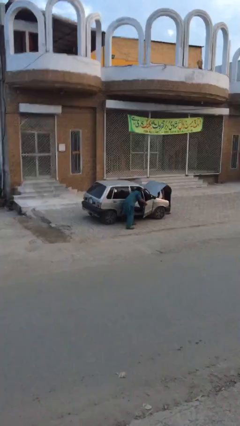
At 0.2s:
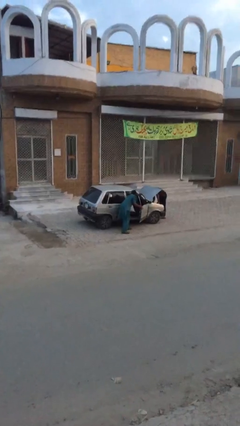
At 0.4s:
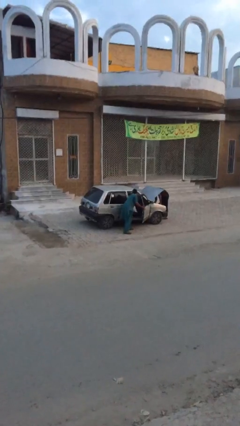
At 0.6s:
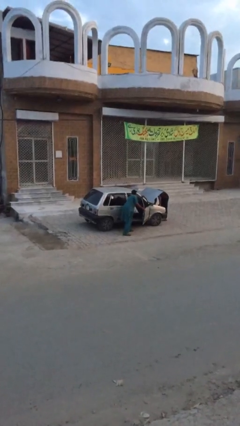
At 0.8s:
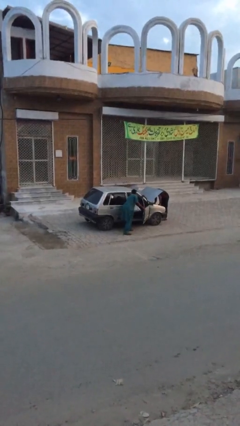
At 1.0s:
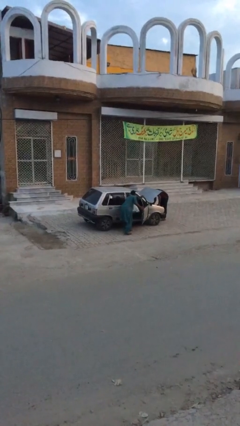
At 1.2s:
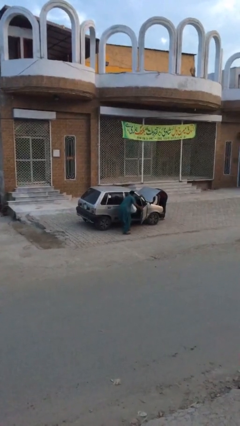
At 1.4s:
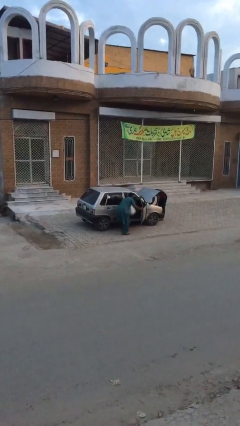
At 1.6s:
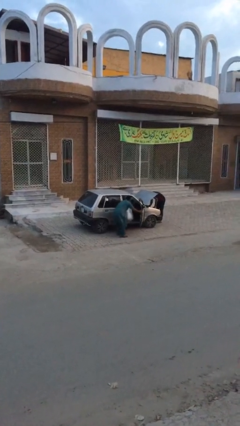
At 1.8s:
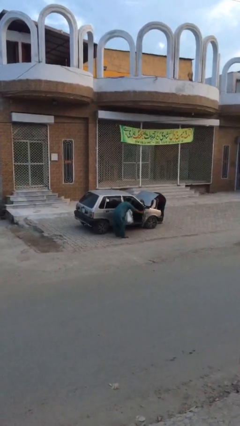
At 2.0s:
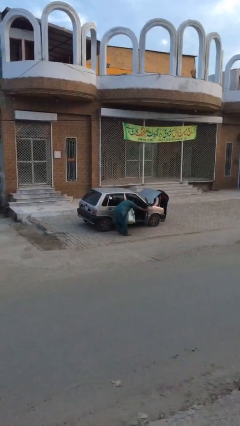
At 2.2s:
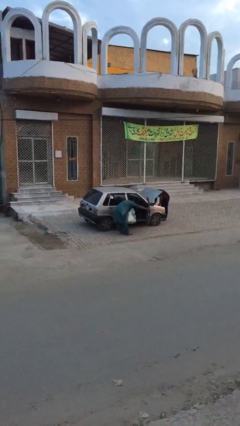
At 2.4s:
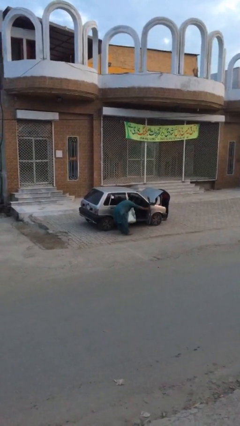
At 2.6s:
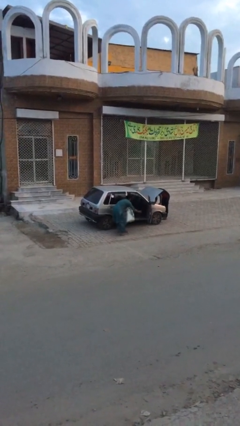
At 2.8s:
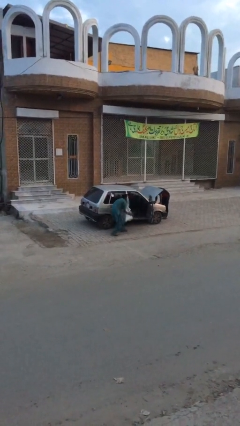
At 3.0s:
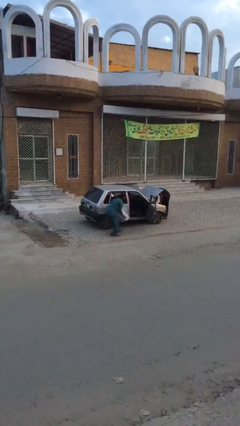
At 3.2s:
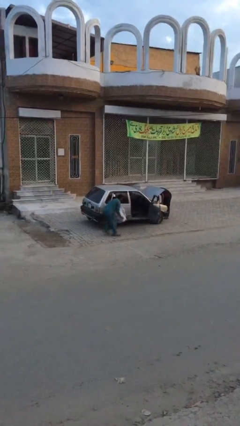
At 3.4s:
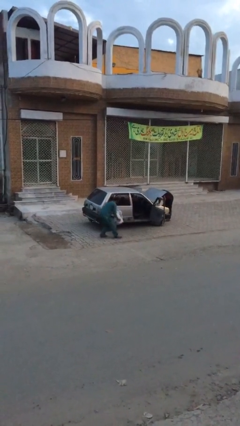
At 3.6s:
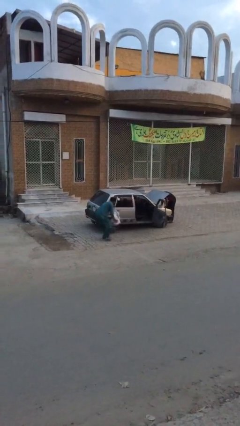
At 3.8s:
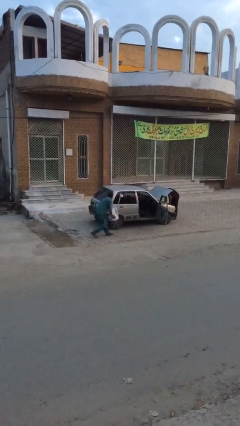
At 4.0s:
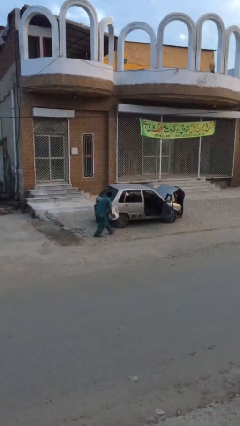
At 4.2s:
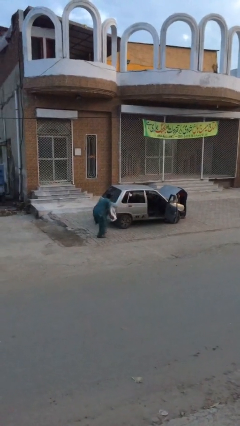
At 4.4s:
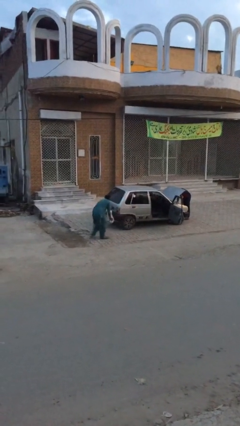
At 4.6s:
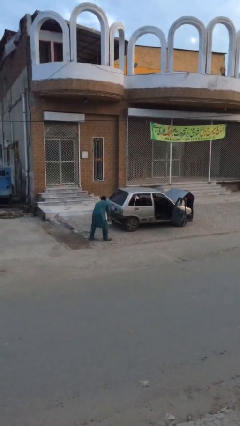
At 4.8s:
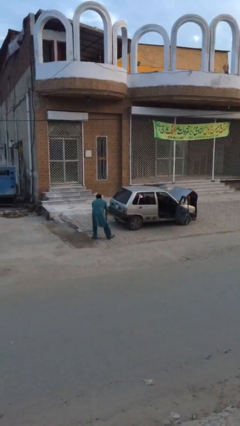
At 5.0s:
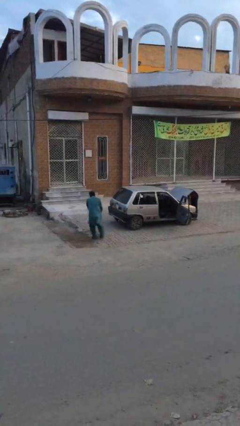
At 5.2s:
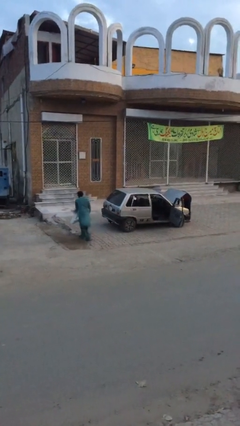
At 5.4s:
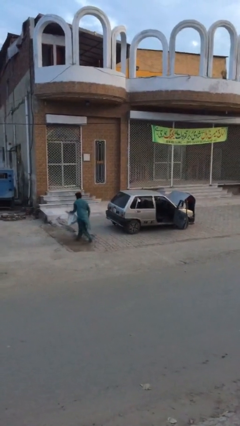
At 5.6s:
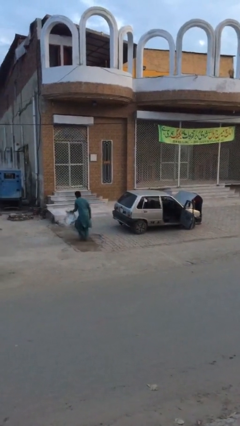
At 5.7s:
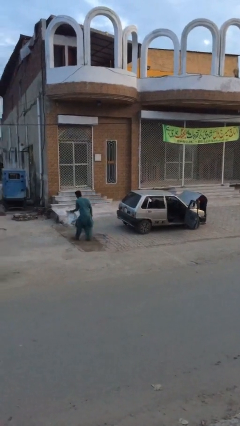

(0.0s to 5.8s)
person steals object from person

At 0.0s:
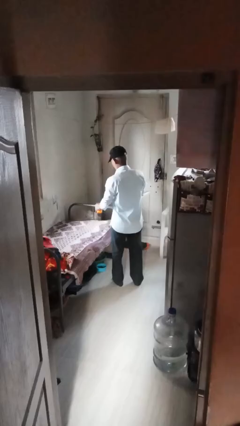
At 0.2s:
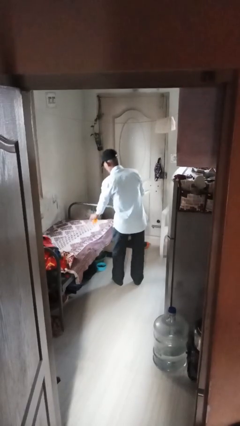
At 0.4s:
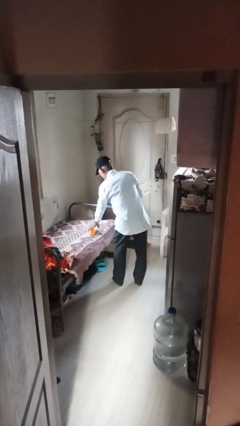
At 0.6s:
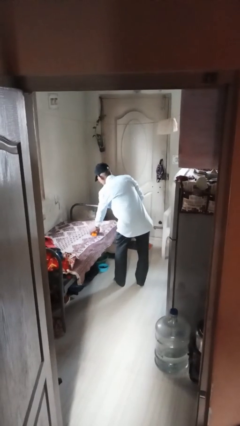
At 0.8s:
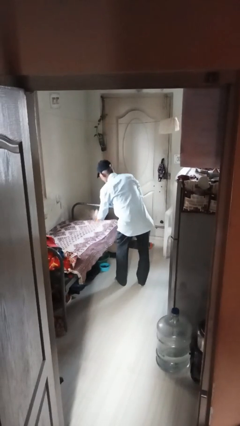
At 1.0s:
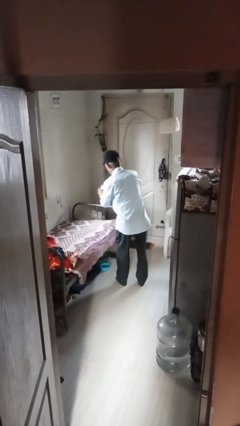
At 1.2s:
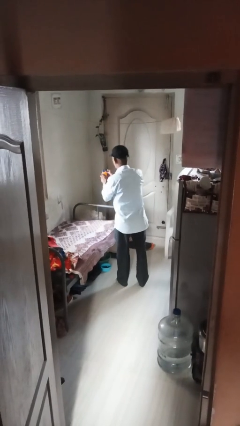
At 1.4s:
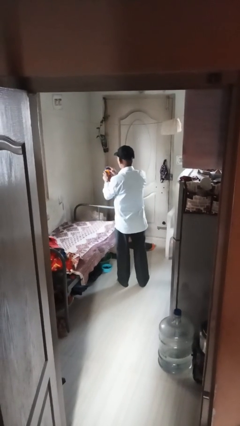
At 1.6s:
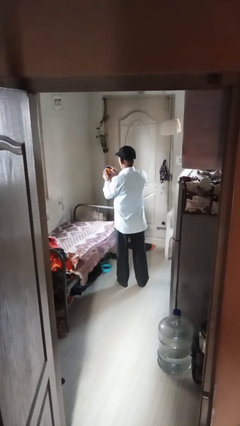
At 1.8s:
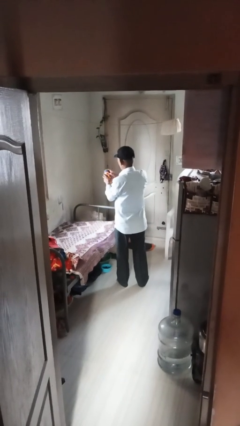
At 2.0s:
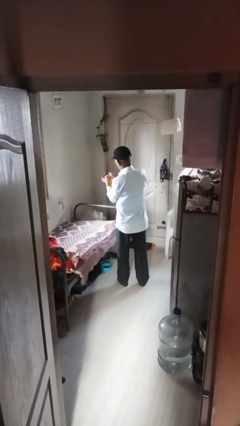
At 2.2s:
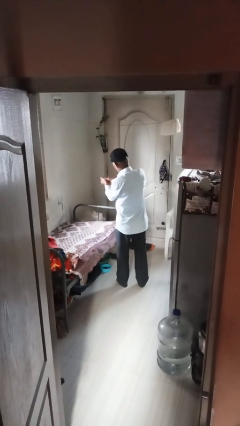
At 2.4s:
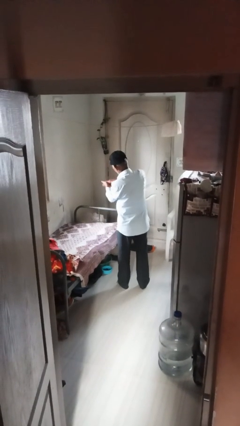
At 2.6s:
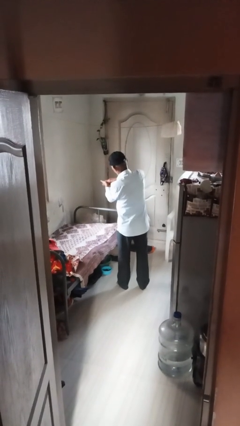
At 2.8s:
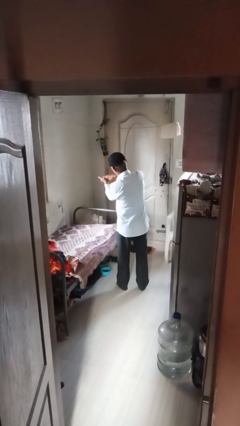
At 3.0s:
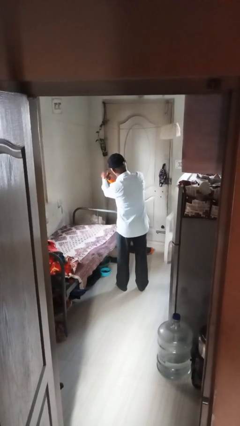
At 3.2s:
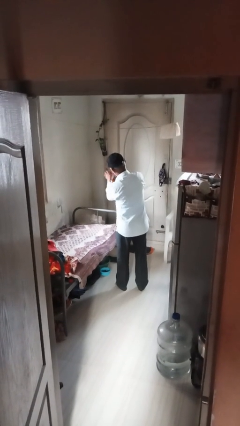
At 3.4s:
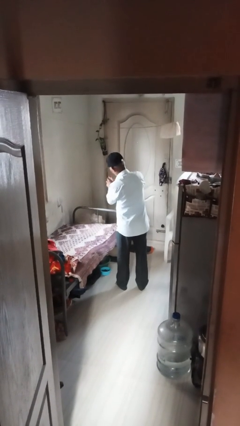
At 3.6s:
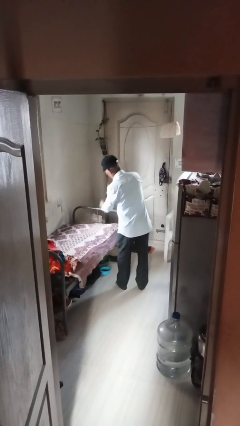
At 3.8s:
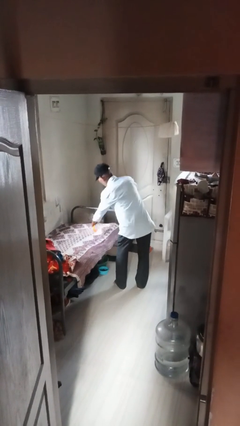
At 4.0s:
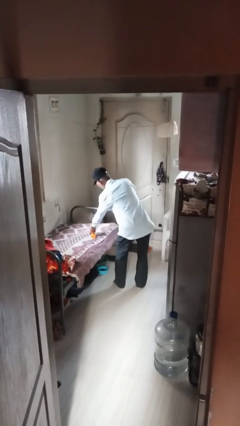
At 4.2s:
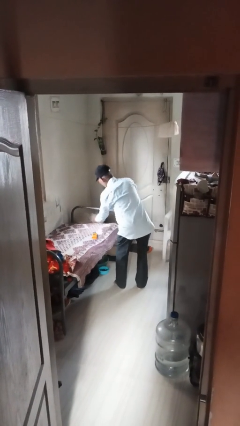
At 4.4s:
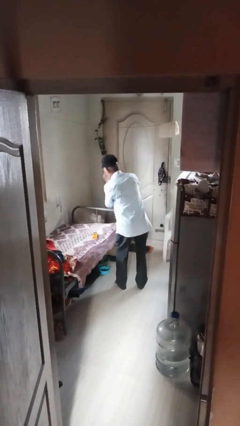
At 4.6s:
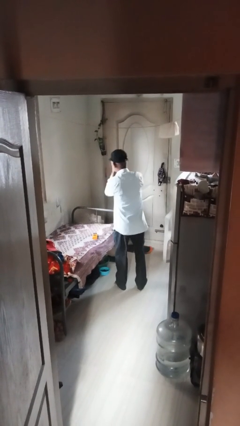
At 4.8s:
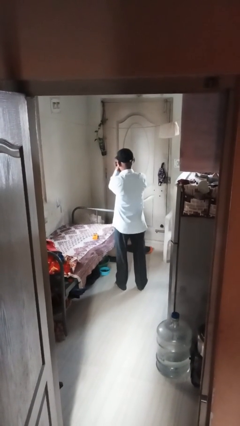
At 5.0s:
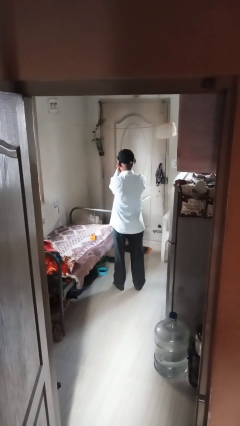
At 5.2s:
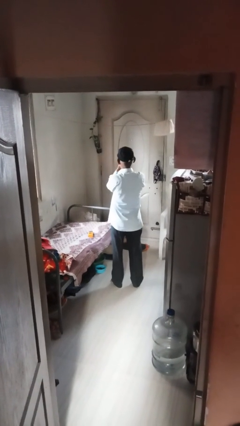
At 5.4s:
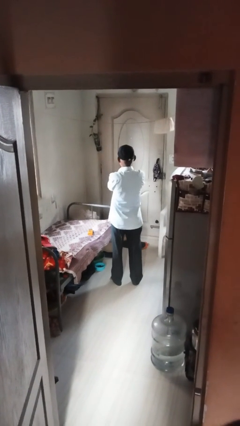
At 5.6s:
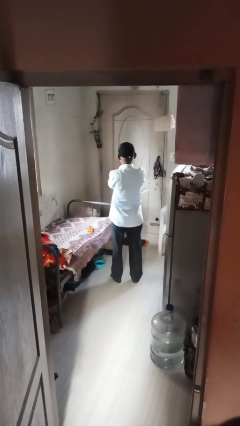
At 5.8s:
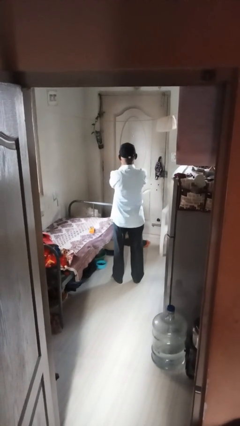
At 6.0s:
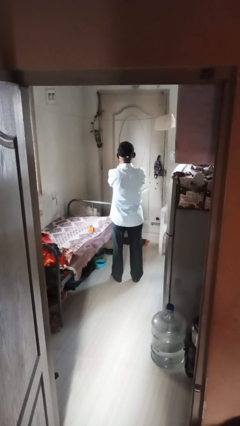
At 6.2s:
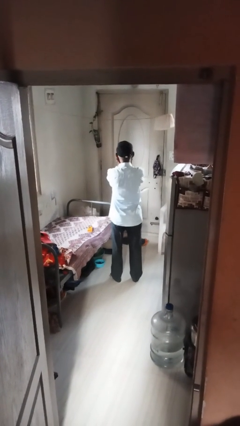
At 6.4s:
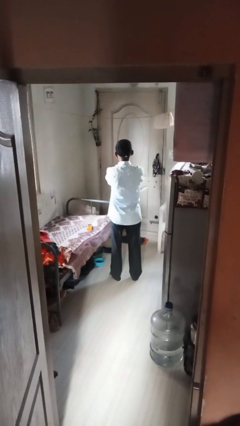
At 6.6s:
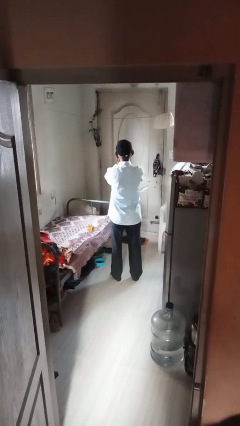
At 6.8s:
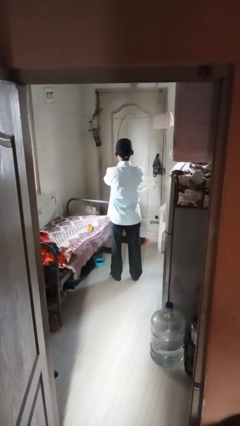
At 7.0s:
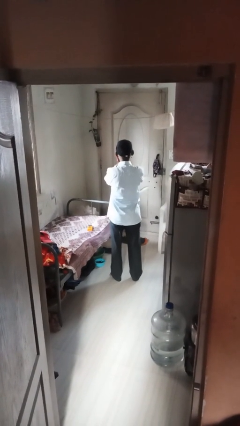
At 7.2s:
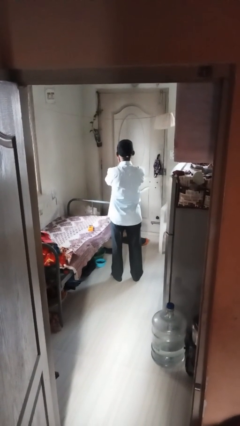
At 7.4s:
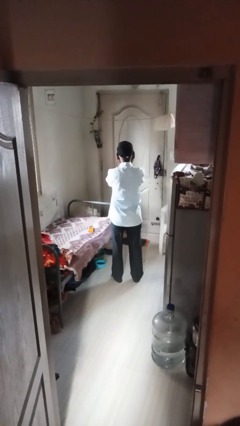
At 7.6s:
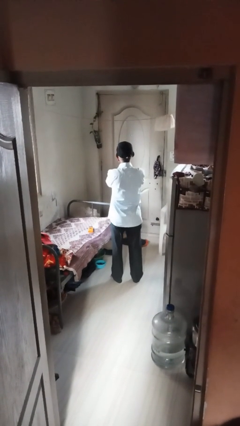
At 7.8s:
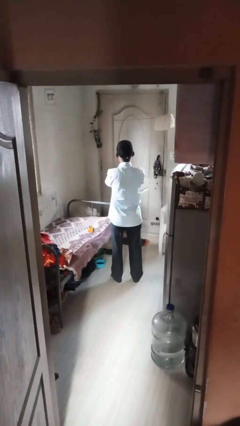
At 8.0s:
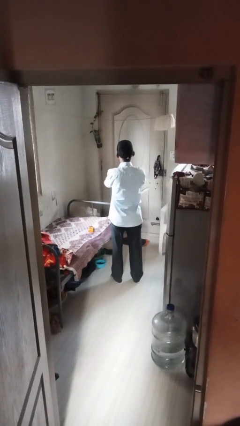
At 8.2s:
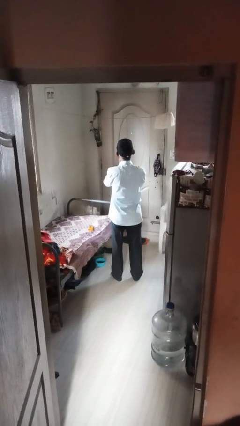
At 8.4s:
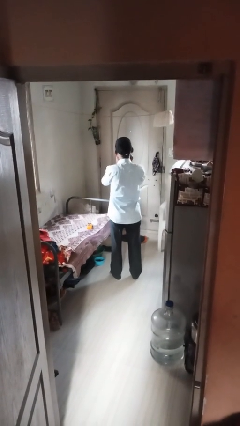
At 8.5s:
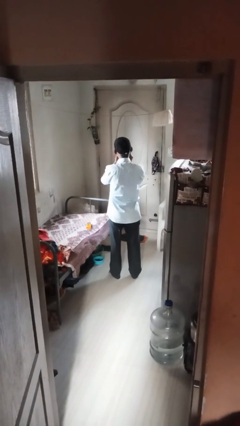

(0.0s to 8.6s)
person applies sunscreen

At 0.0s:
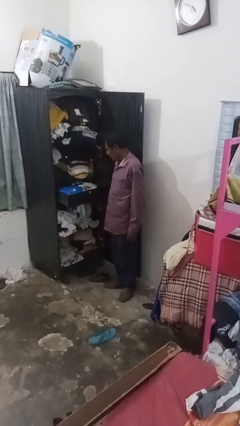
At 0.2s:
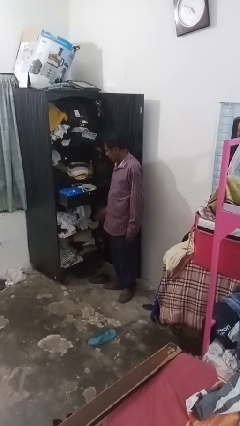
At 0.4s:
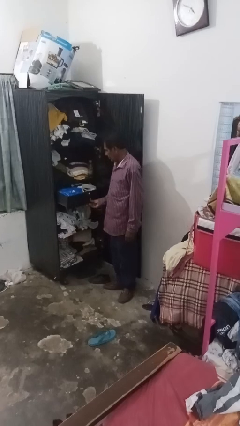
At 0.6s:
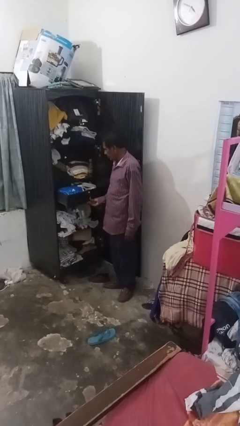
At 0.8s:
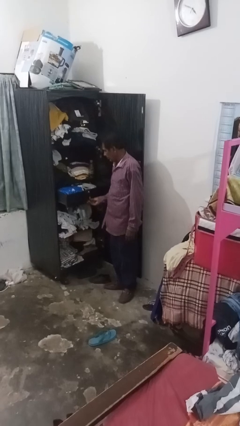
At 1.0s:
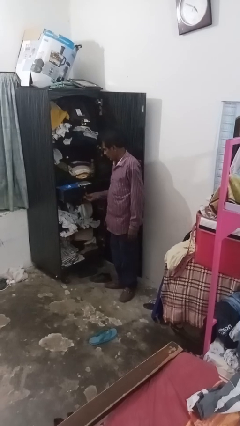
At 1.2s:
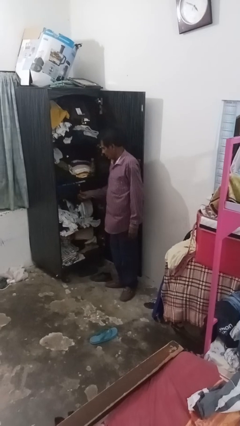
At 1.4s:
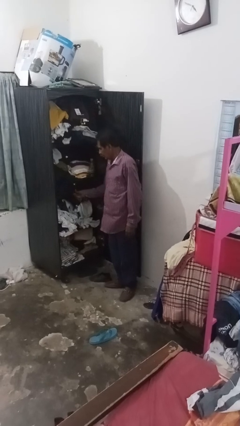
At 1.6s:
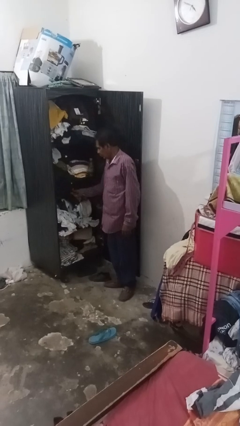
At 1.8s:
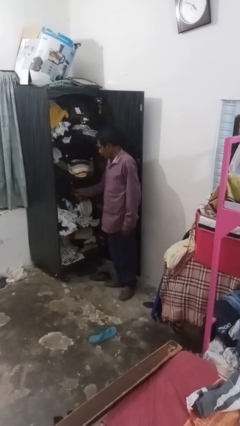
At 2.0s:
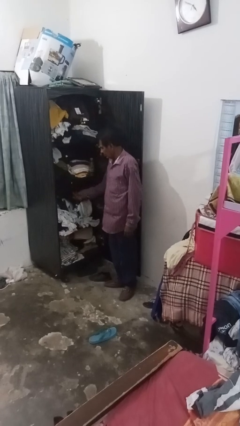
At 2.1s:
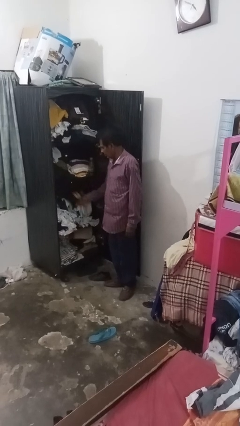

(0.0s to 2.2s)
person closes dresser drawer

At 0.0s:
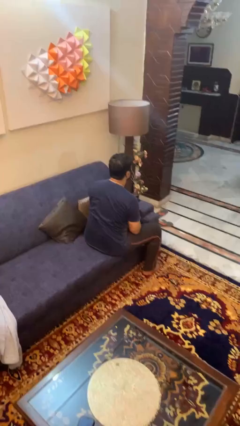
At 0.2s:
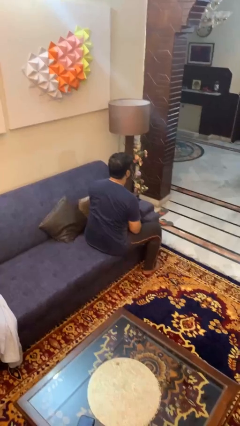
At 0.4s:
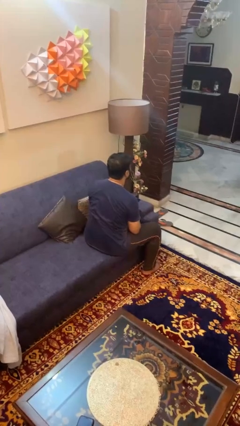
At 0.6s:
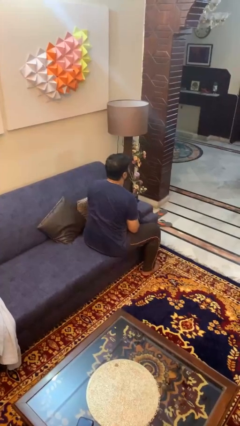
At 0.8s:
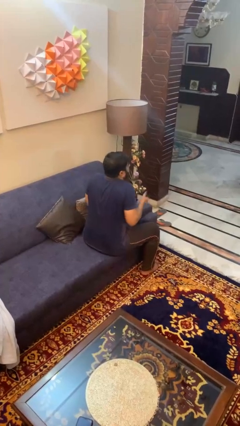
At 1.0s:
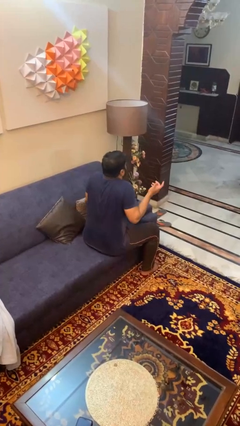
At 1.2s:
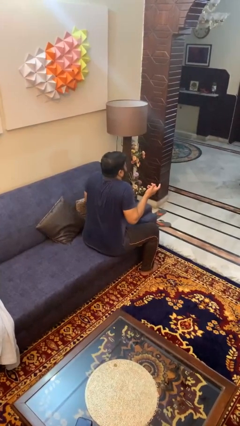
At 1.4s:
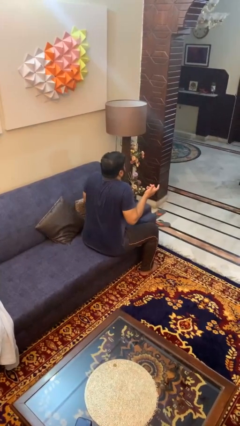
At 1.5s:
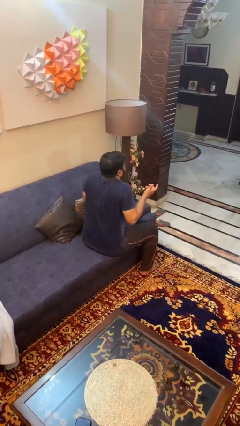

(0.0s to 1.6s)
person shrugs
